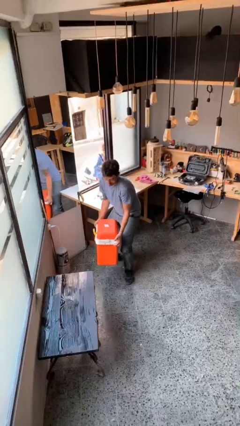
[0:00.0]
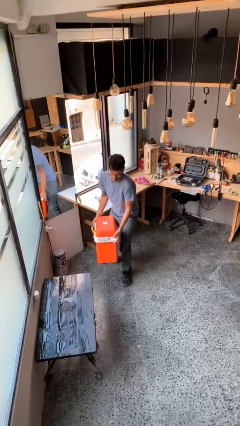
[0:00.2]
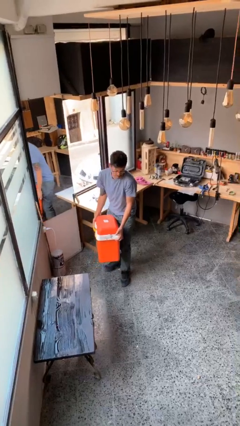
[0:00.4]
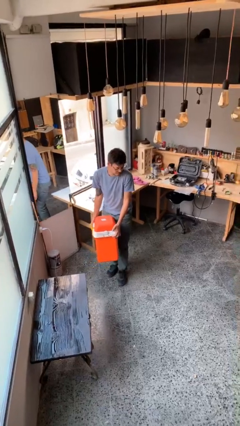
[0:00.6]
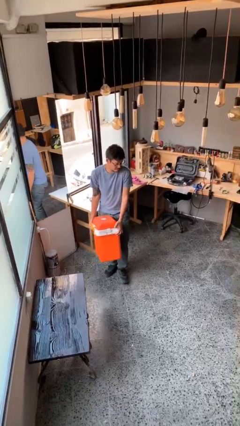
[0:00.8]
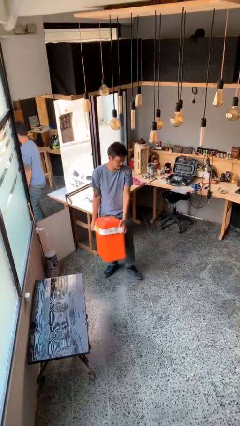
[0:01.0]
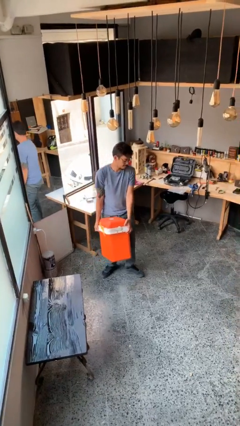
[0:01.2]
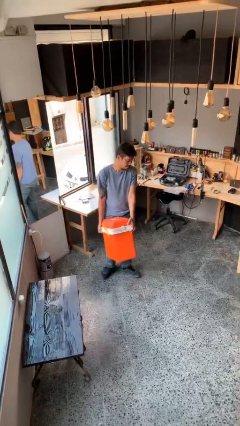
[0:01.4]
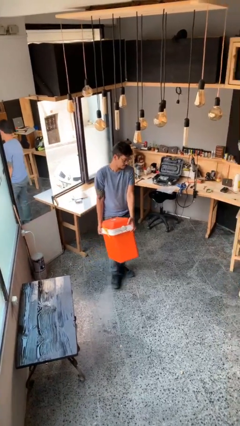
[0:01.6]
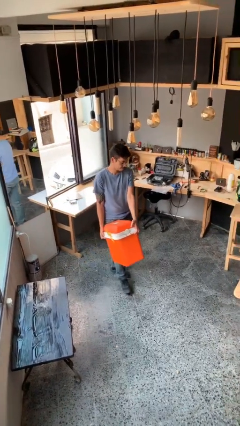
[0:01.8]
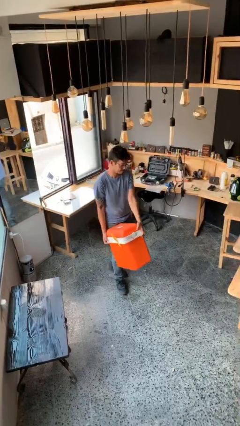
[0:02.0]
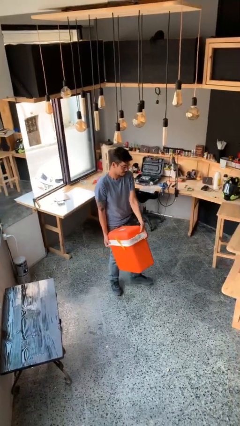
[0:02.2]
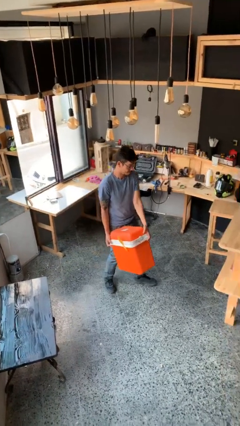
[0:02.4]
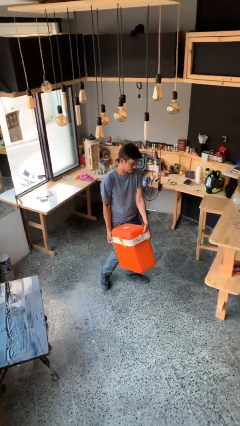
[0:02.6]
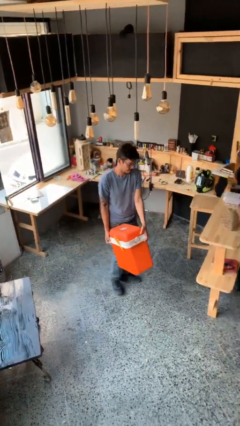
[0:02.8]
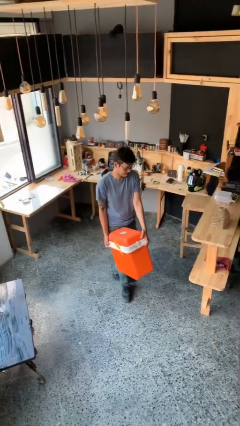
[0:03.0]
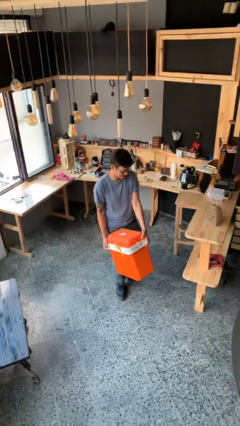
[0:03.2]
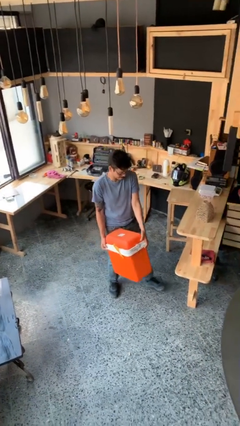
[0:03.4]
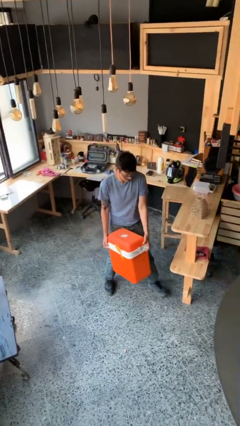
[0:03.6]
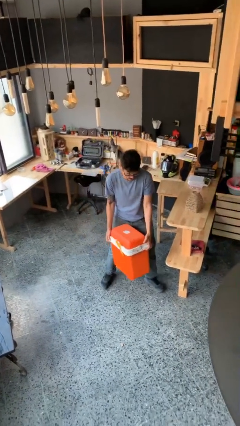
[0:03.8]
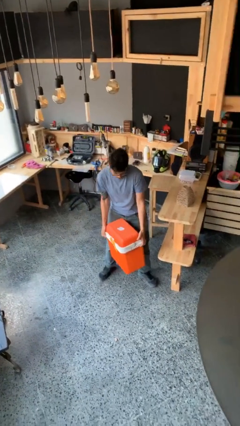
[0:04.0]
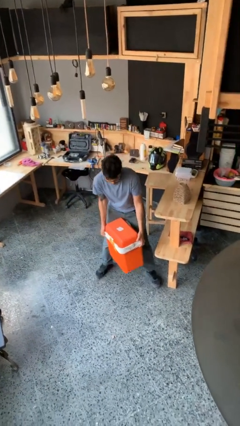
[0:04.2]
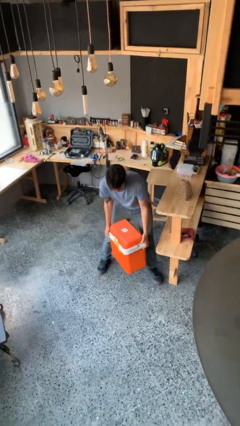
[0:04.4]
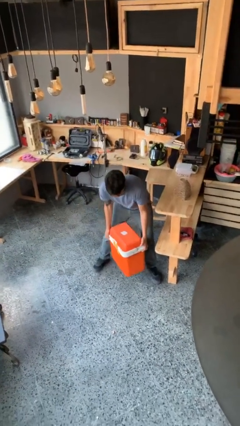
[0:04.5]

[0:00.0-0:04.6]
person carries heavy object

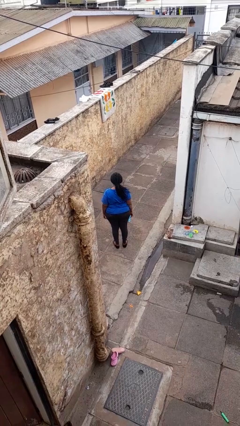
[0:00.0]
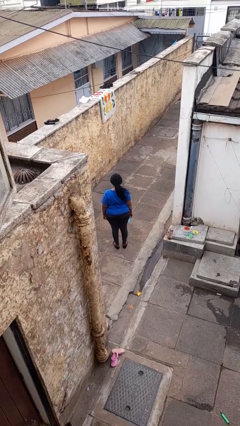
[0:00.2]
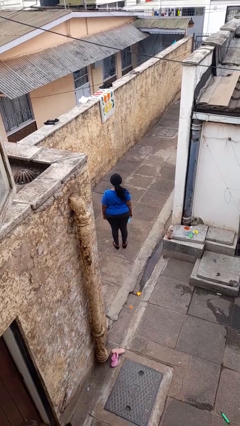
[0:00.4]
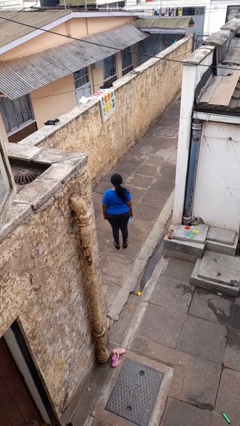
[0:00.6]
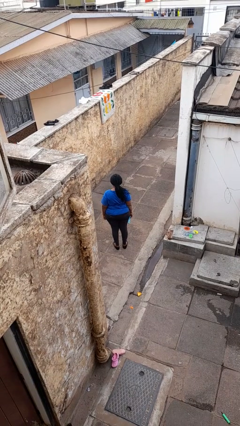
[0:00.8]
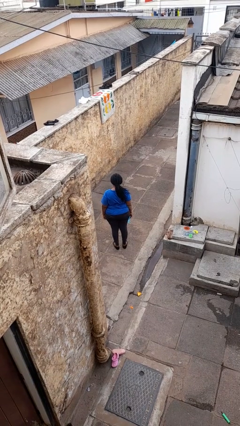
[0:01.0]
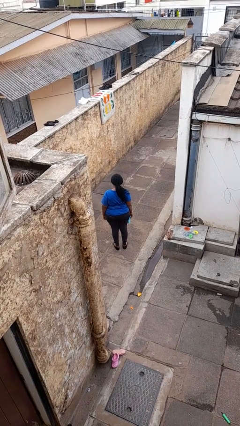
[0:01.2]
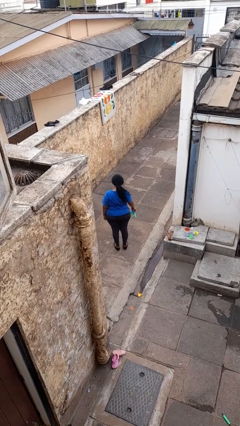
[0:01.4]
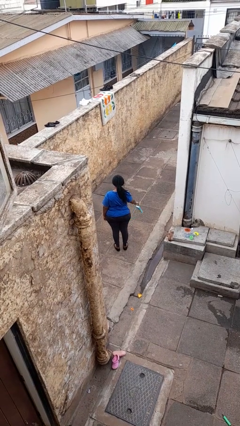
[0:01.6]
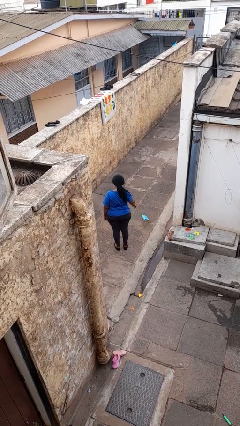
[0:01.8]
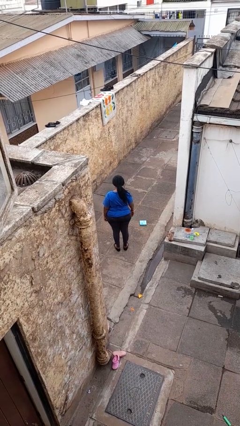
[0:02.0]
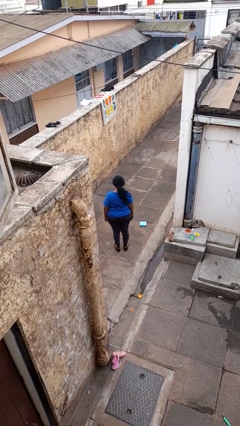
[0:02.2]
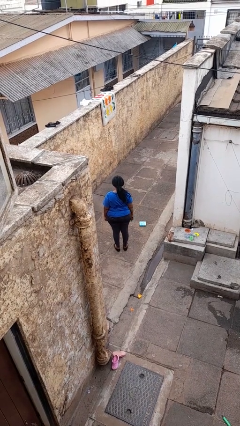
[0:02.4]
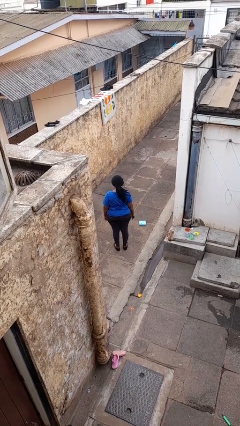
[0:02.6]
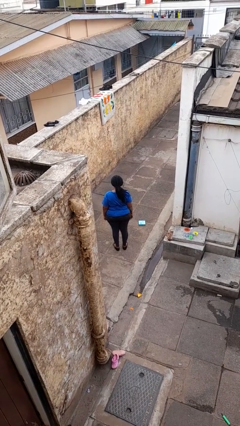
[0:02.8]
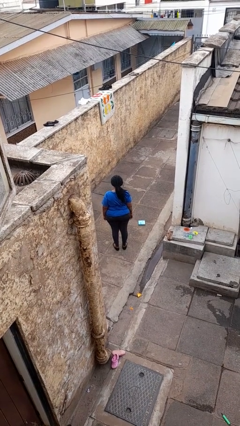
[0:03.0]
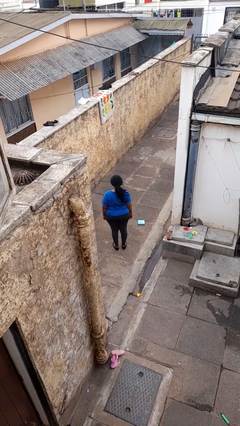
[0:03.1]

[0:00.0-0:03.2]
person throws object to ground

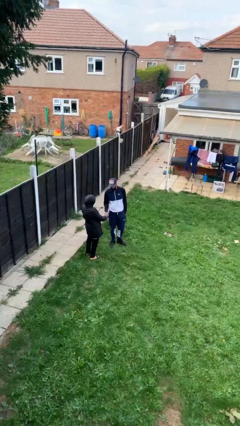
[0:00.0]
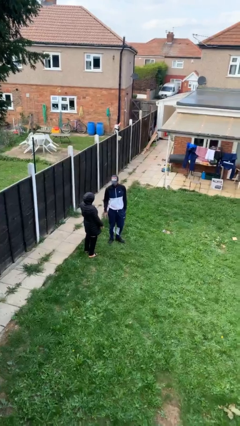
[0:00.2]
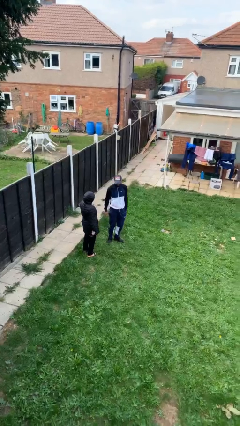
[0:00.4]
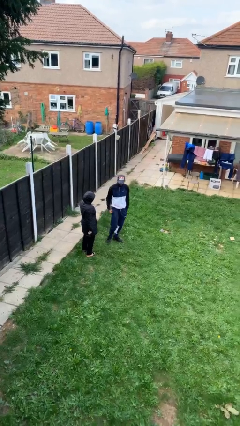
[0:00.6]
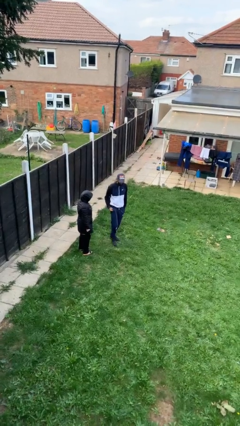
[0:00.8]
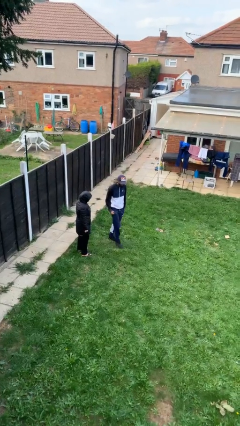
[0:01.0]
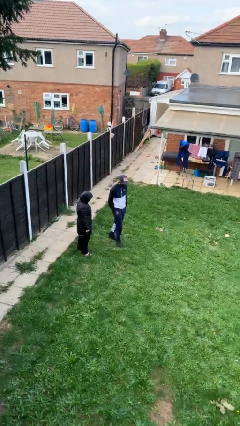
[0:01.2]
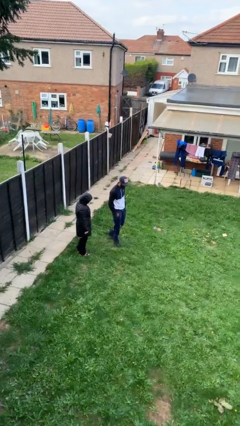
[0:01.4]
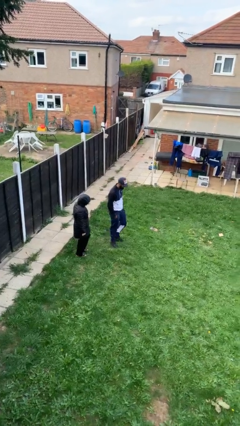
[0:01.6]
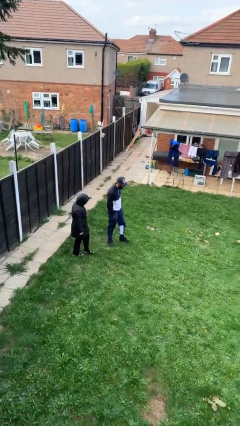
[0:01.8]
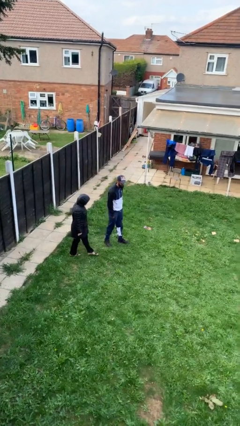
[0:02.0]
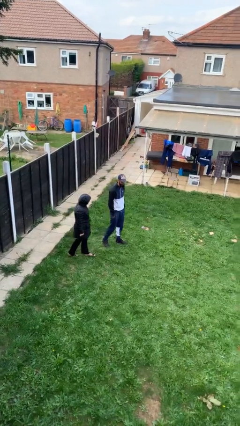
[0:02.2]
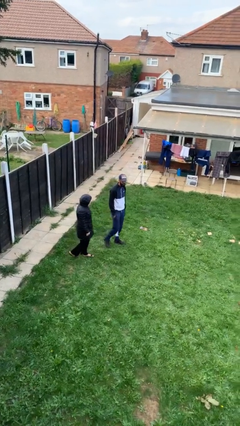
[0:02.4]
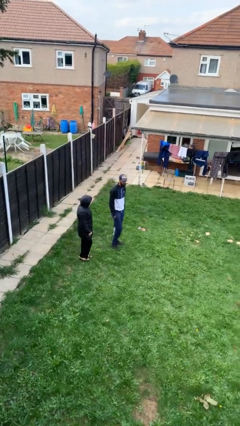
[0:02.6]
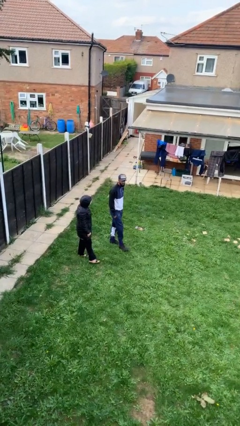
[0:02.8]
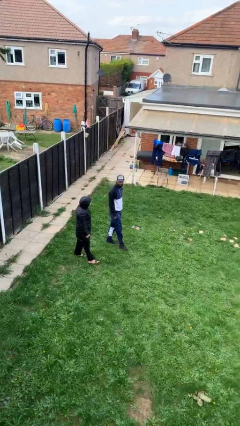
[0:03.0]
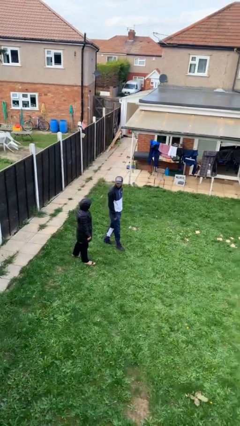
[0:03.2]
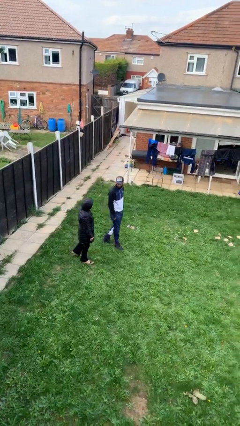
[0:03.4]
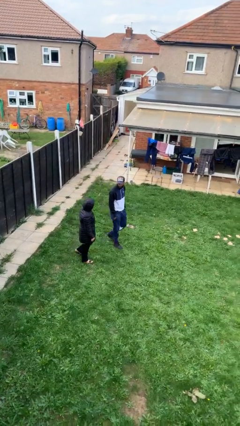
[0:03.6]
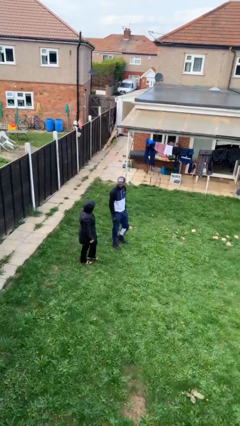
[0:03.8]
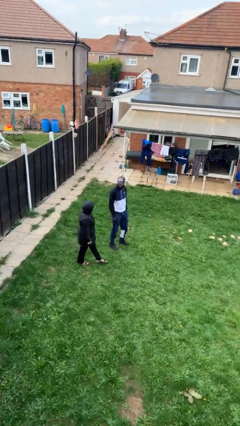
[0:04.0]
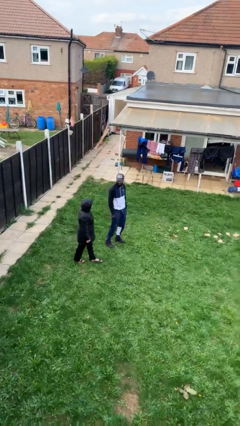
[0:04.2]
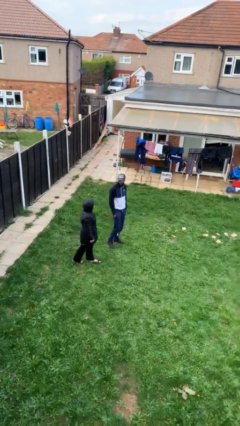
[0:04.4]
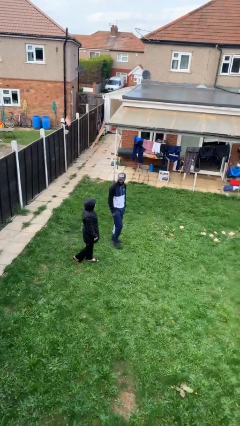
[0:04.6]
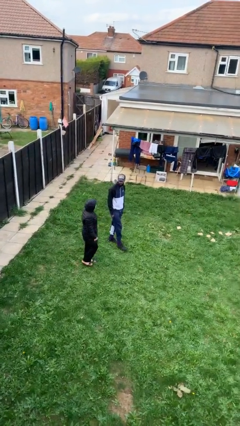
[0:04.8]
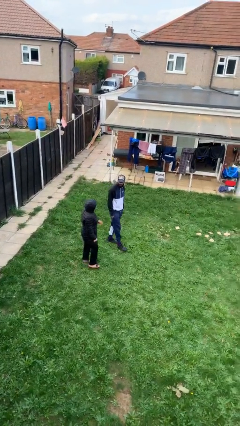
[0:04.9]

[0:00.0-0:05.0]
person talks to person

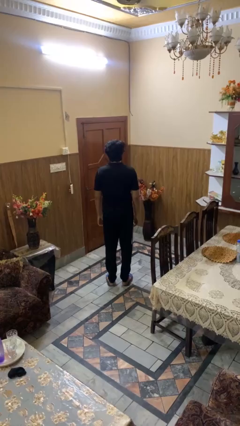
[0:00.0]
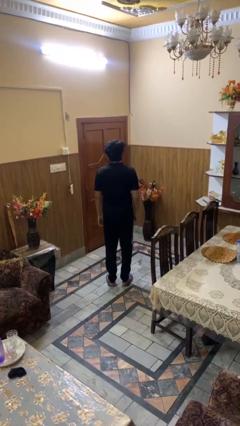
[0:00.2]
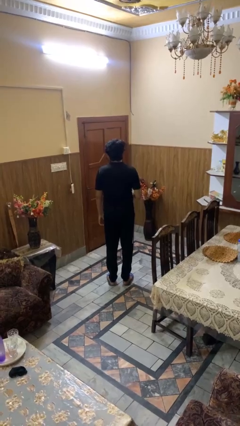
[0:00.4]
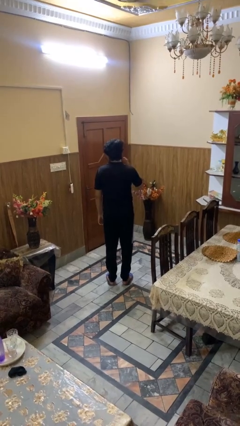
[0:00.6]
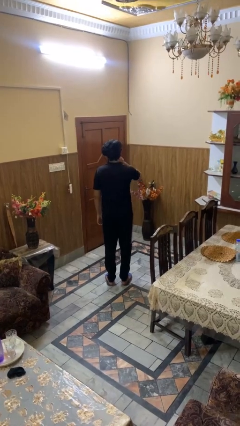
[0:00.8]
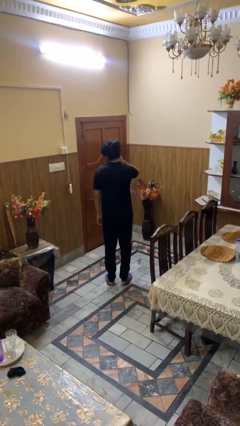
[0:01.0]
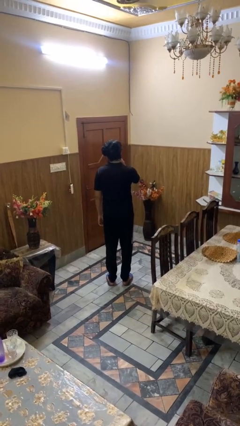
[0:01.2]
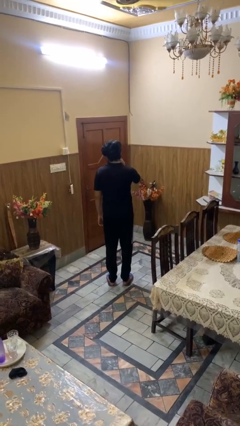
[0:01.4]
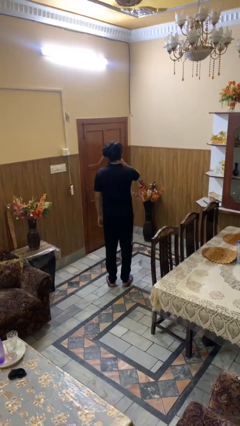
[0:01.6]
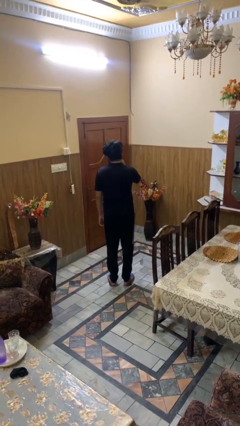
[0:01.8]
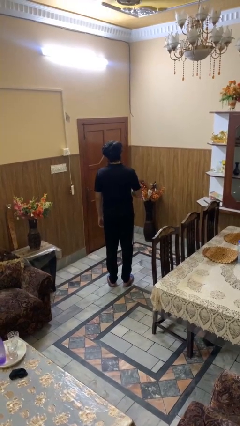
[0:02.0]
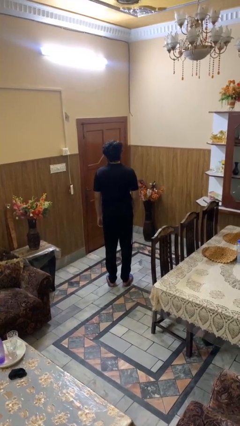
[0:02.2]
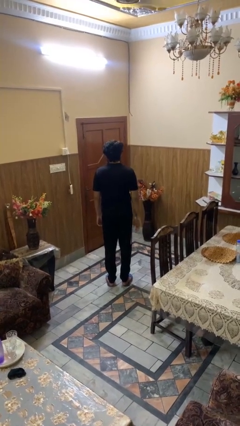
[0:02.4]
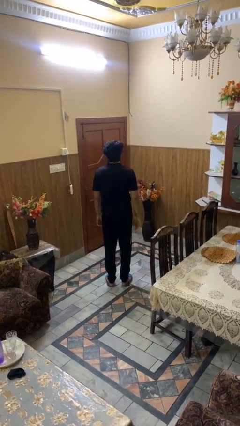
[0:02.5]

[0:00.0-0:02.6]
person rubs neck

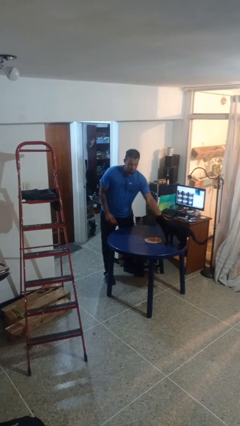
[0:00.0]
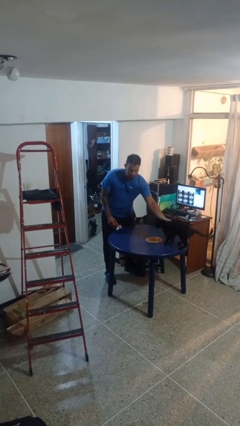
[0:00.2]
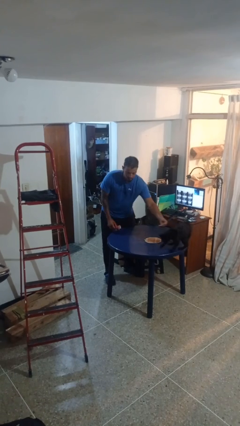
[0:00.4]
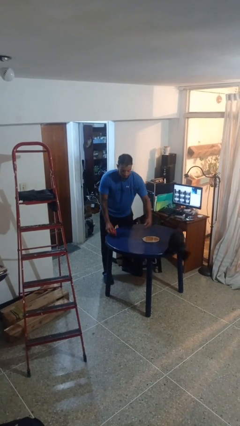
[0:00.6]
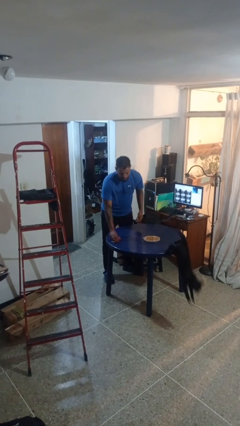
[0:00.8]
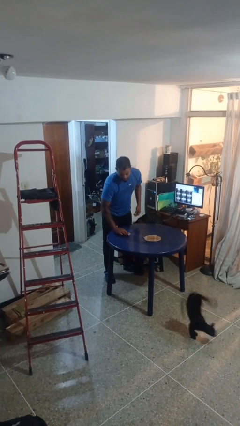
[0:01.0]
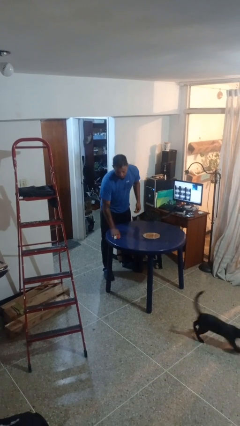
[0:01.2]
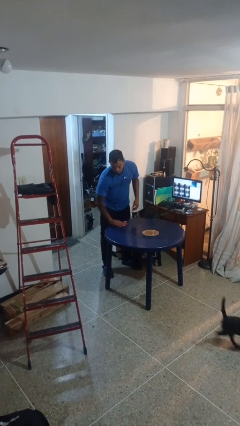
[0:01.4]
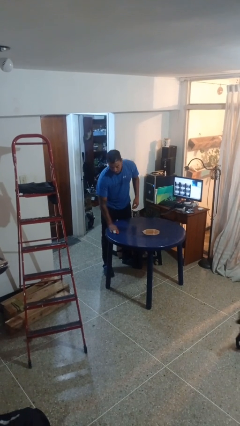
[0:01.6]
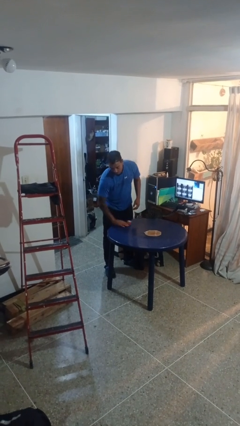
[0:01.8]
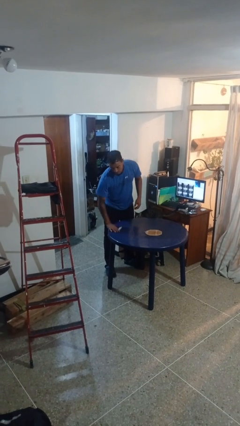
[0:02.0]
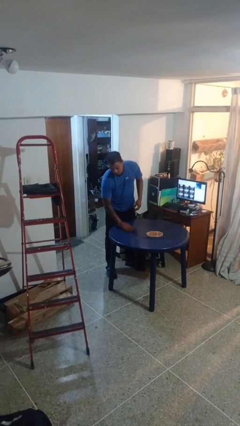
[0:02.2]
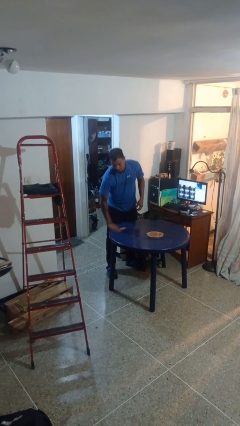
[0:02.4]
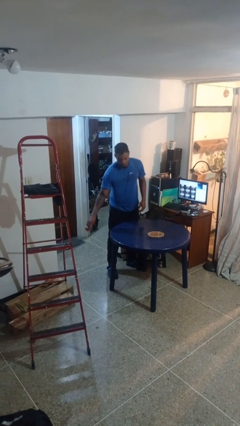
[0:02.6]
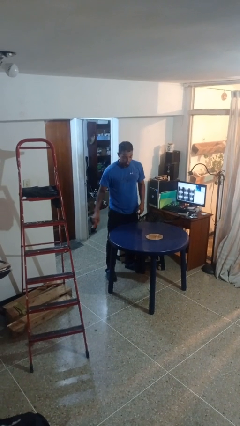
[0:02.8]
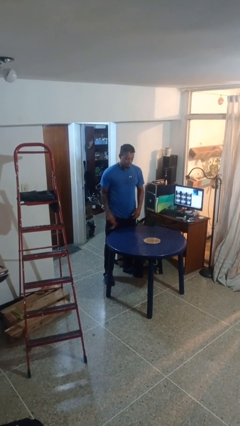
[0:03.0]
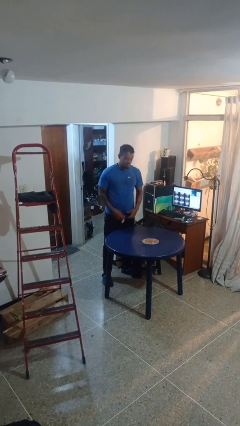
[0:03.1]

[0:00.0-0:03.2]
person cleans table with rag
